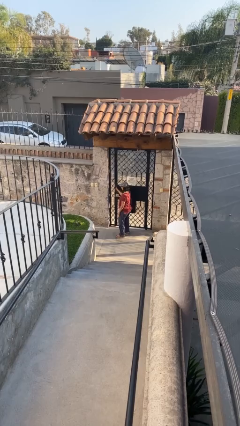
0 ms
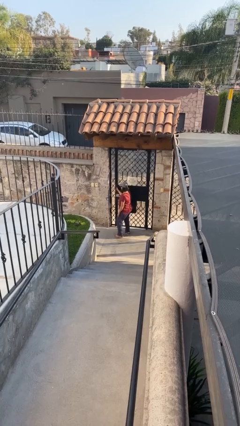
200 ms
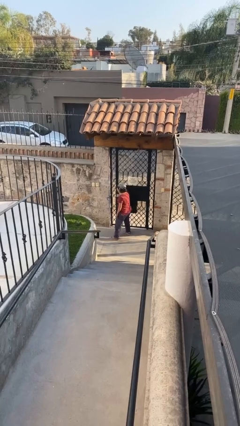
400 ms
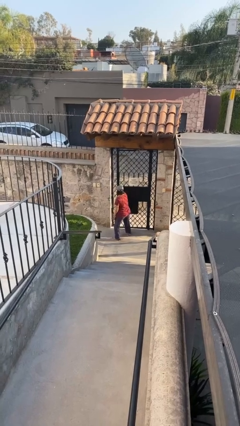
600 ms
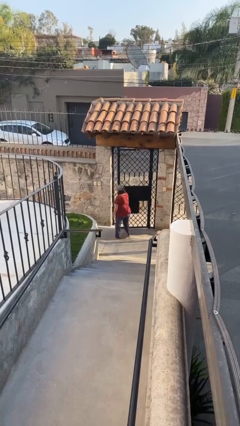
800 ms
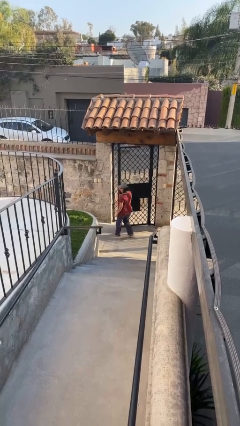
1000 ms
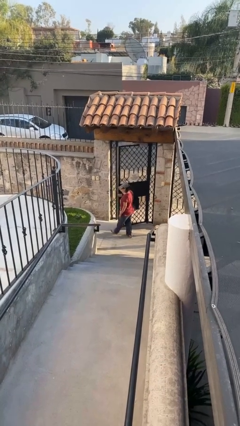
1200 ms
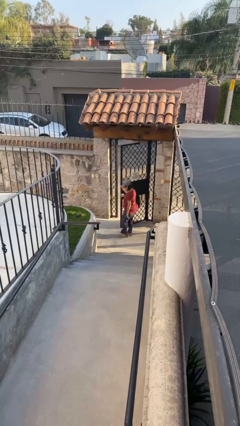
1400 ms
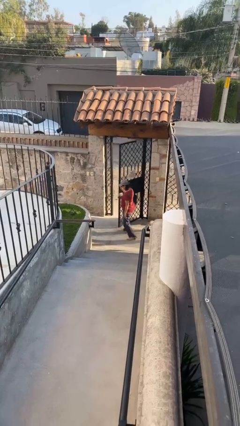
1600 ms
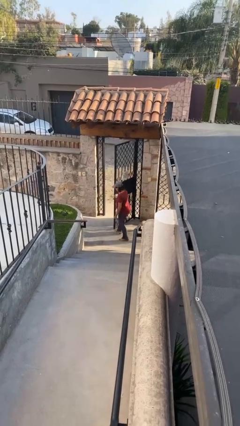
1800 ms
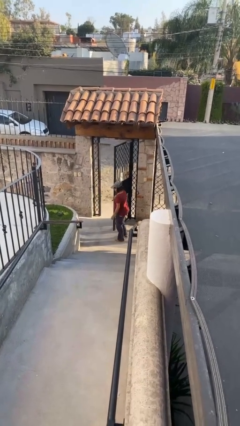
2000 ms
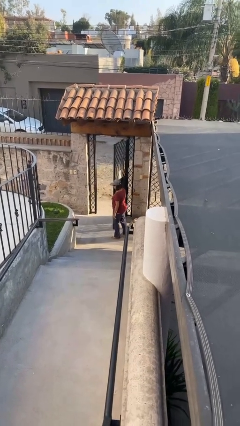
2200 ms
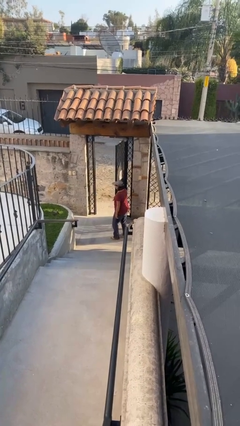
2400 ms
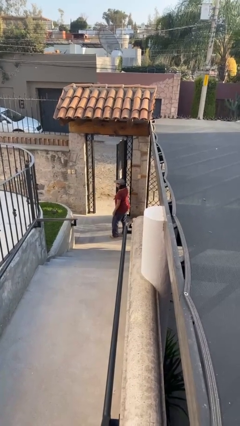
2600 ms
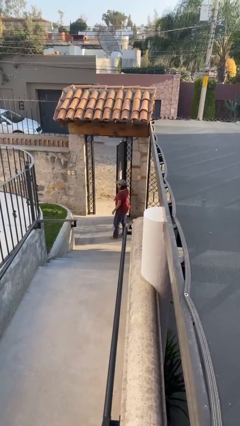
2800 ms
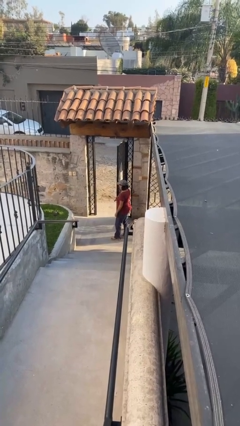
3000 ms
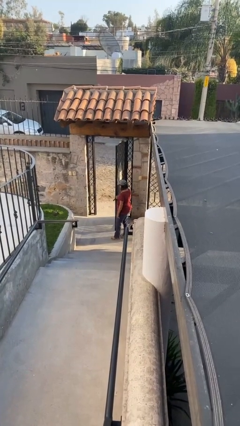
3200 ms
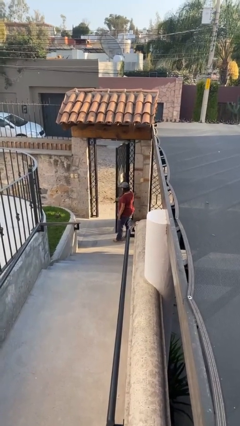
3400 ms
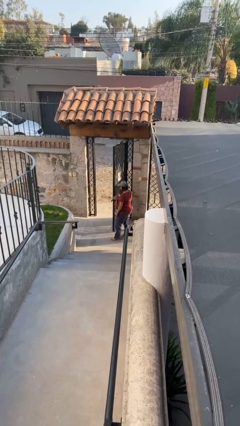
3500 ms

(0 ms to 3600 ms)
person opens facility door

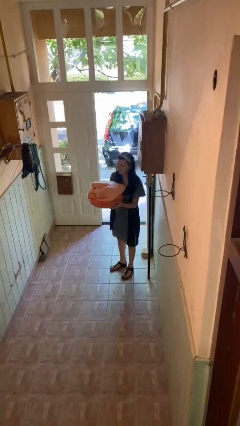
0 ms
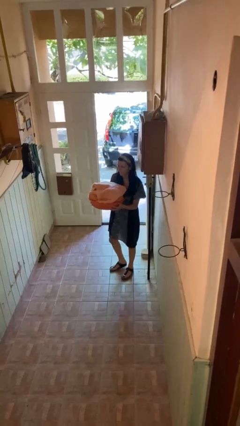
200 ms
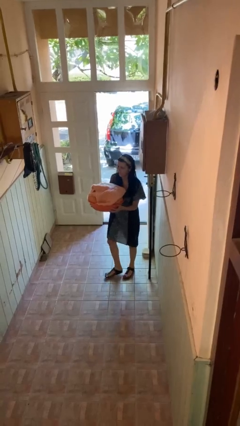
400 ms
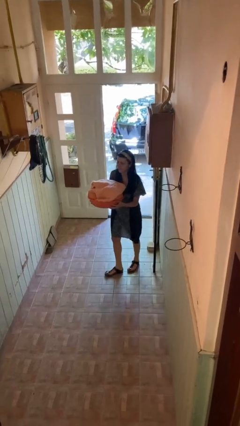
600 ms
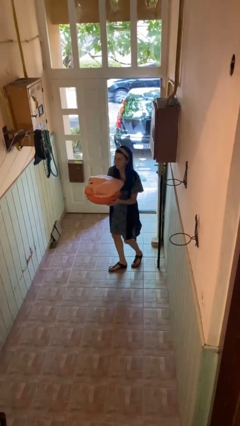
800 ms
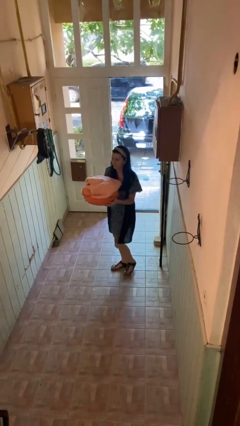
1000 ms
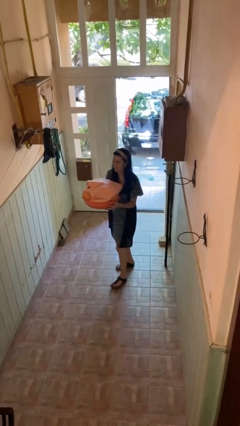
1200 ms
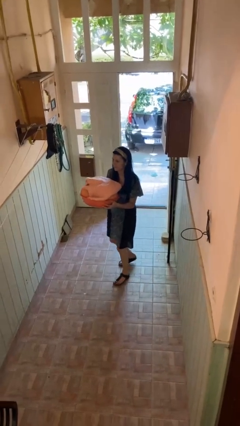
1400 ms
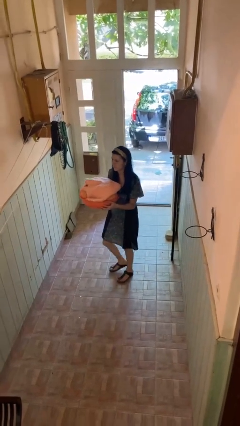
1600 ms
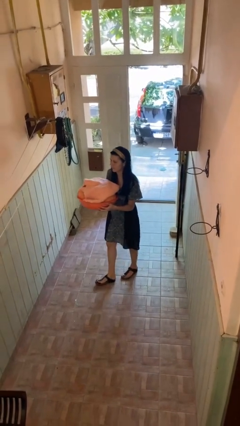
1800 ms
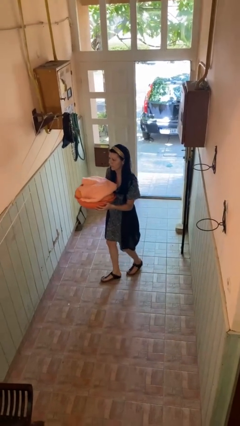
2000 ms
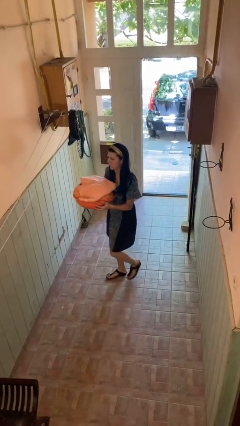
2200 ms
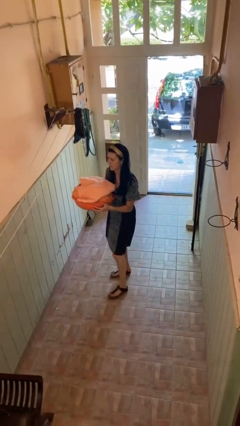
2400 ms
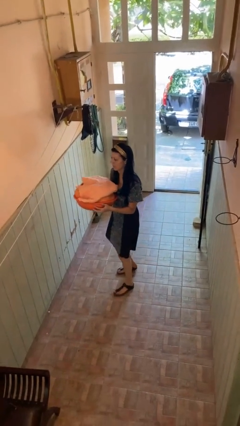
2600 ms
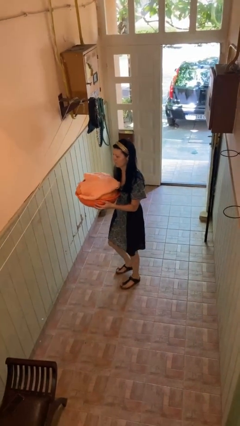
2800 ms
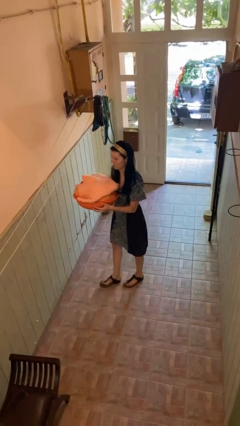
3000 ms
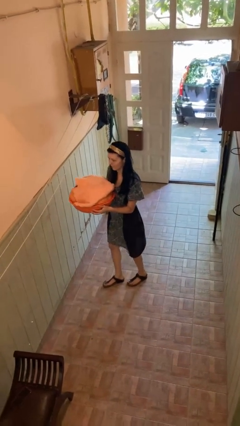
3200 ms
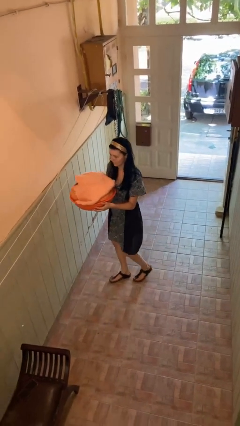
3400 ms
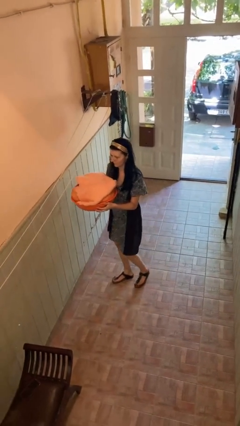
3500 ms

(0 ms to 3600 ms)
person carries laundry basket

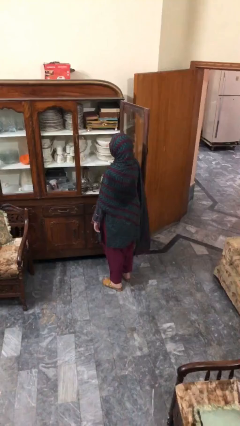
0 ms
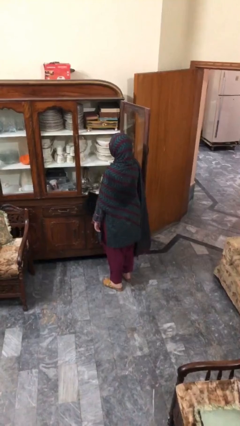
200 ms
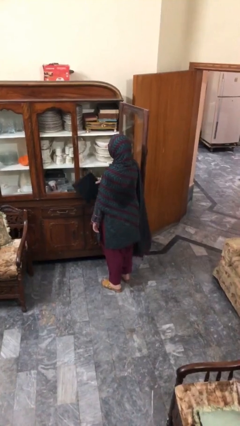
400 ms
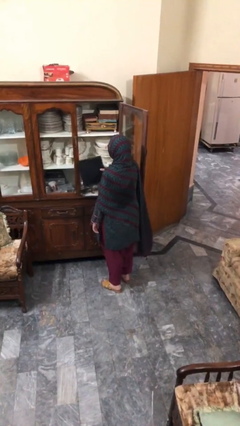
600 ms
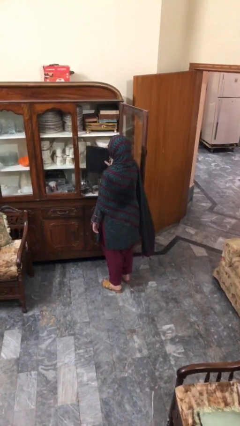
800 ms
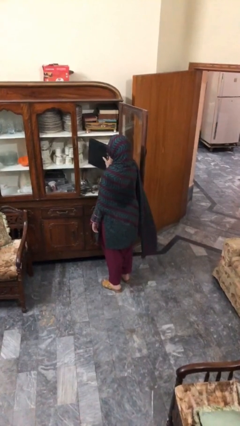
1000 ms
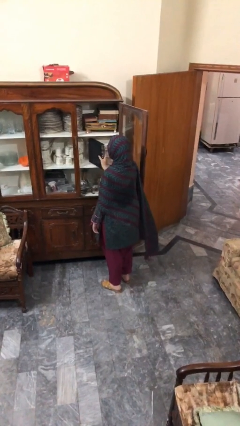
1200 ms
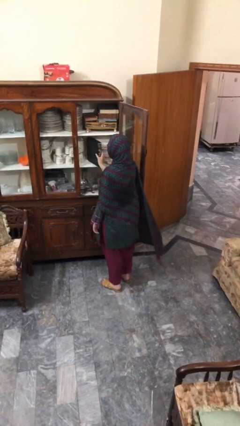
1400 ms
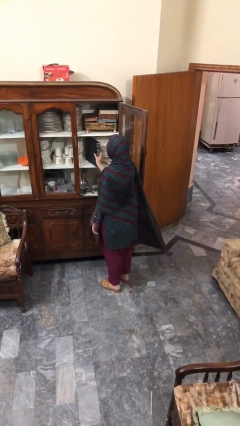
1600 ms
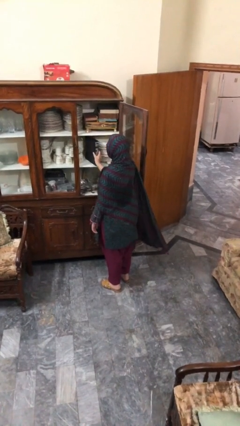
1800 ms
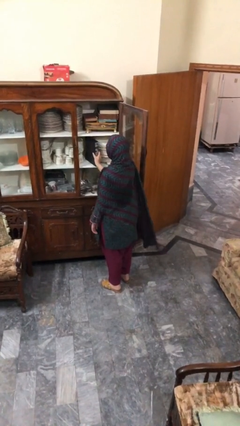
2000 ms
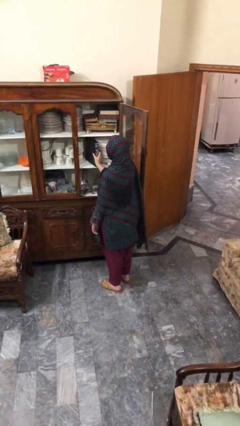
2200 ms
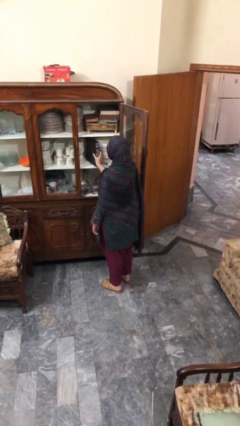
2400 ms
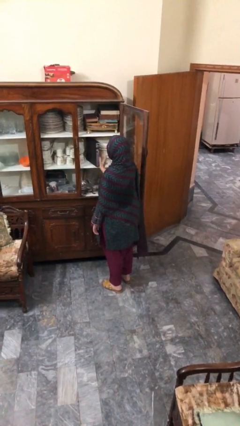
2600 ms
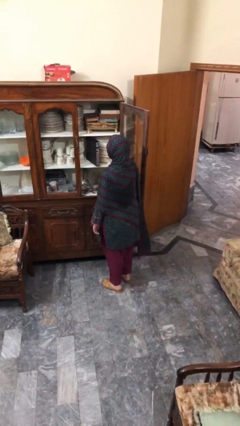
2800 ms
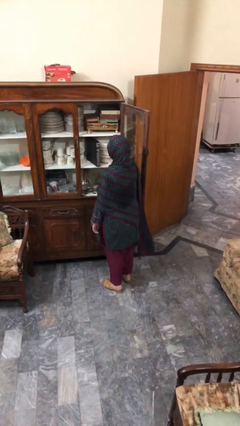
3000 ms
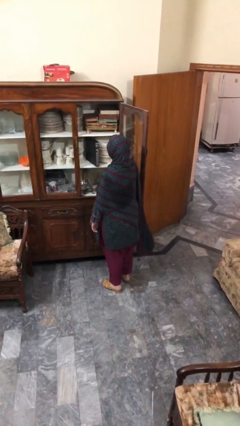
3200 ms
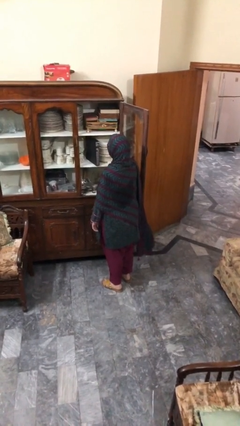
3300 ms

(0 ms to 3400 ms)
person puts down object on countertop

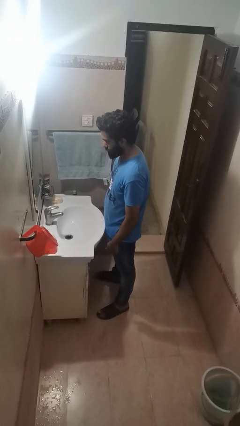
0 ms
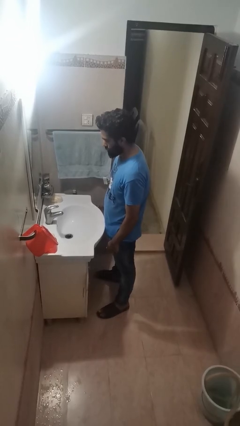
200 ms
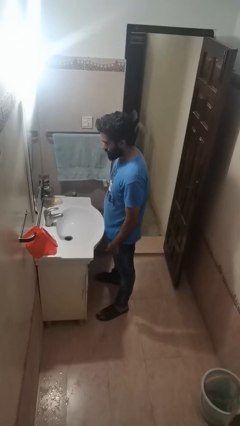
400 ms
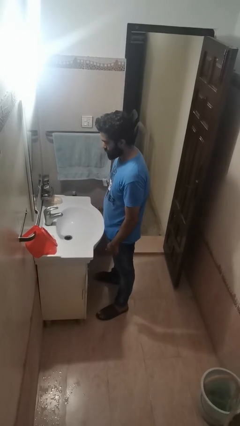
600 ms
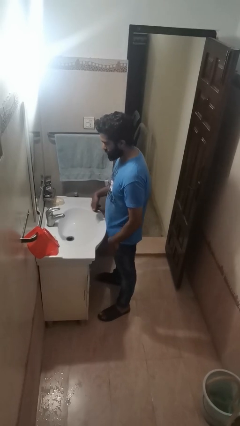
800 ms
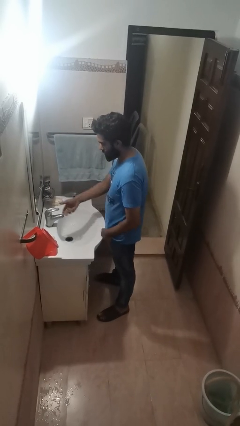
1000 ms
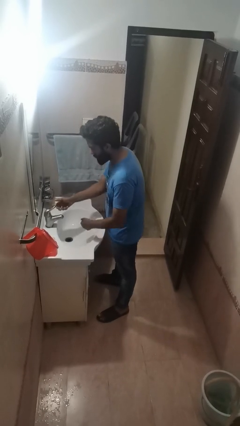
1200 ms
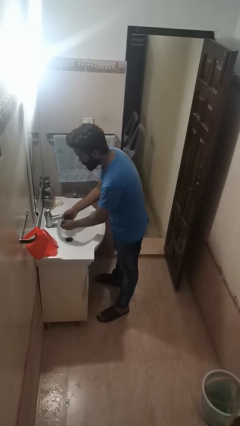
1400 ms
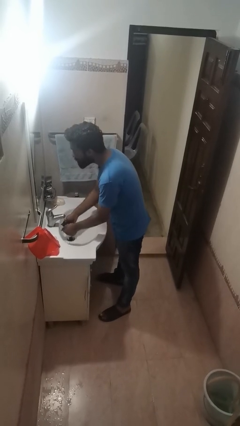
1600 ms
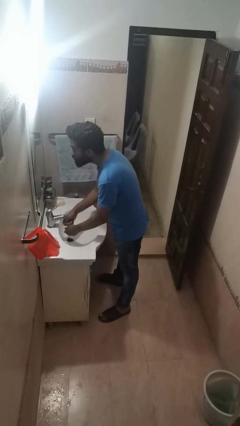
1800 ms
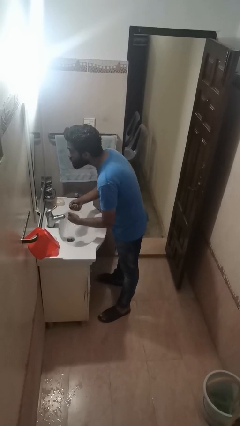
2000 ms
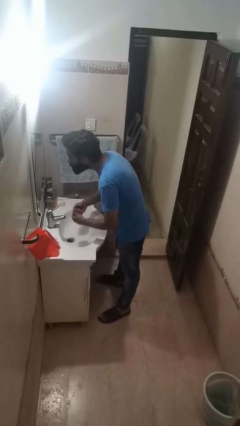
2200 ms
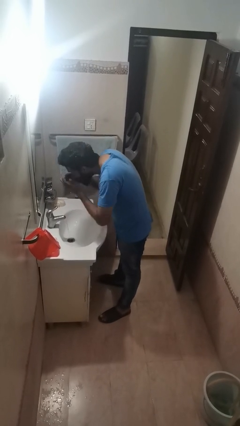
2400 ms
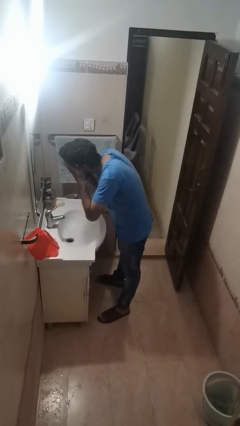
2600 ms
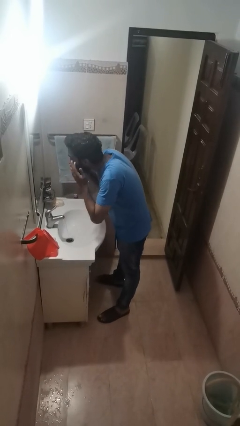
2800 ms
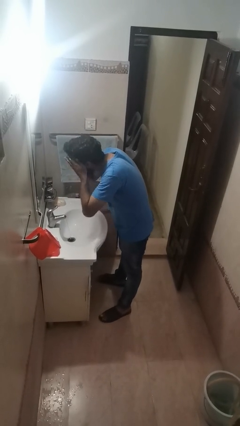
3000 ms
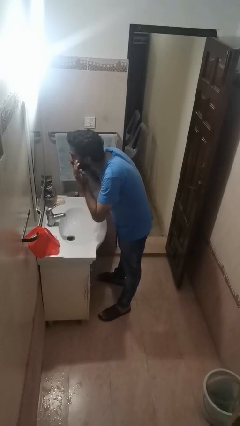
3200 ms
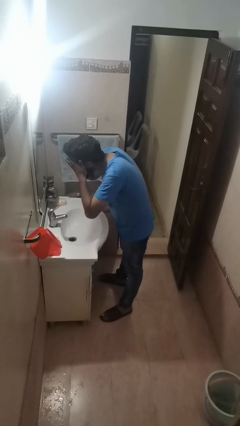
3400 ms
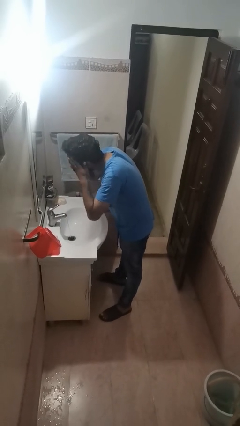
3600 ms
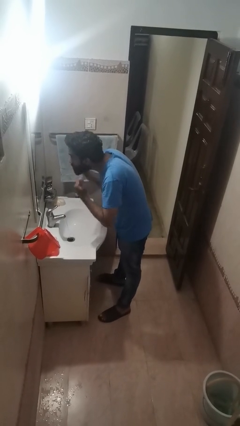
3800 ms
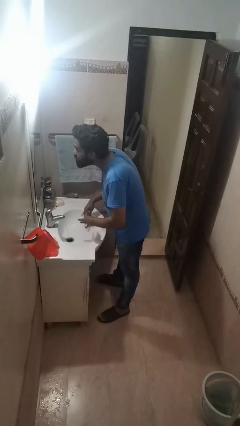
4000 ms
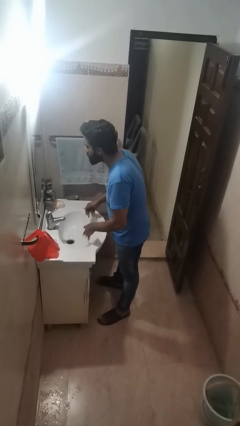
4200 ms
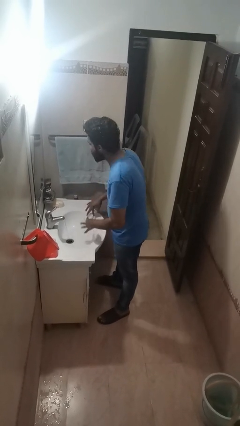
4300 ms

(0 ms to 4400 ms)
person washes face

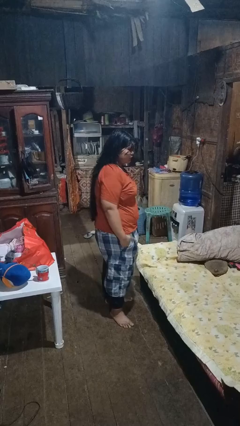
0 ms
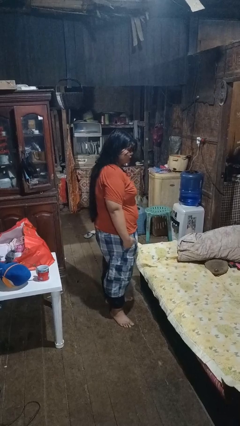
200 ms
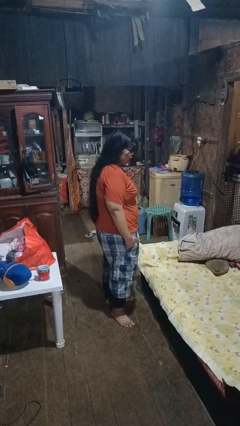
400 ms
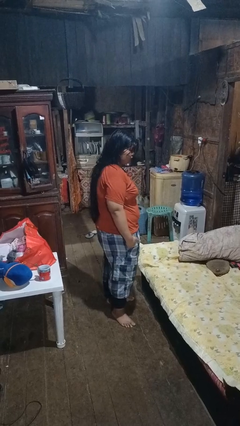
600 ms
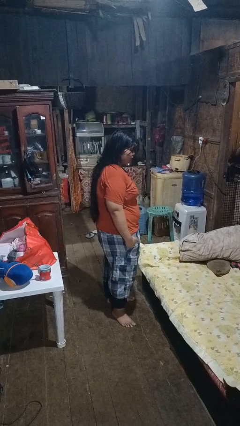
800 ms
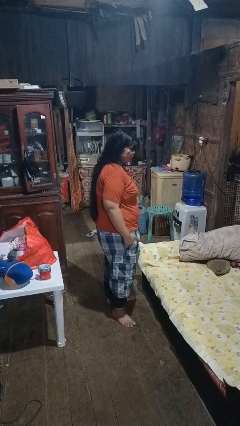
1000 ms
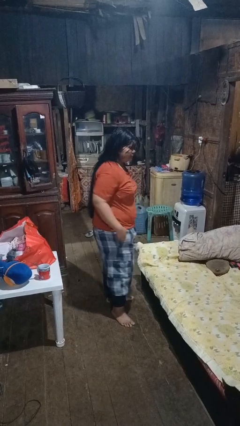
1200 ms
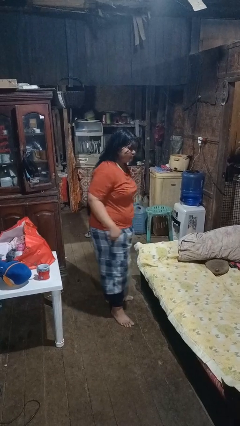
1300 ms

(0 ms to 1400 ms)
person puts hands in back pockets

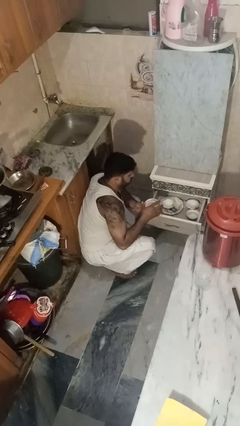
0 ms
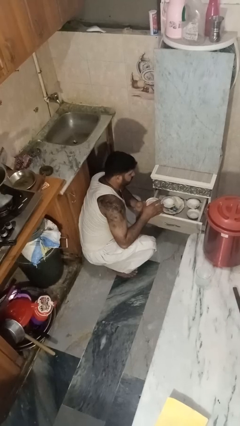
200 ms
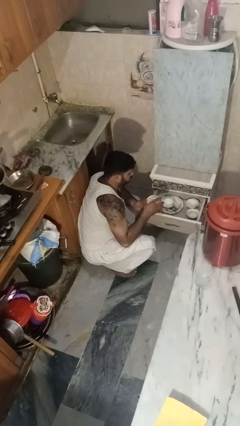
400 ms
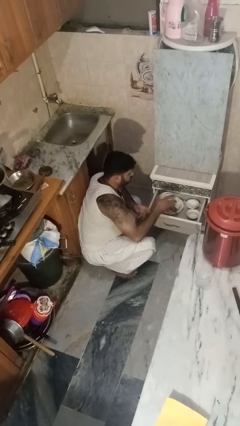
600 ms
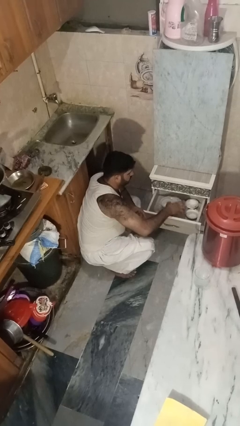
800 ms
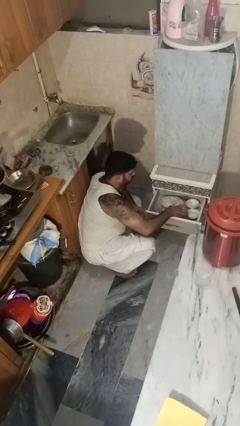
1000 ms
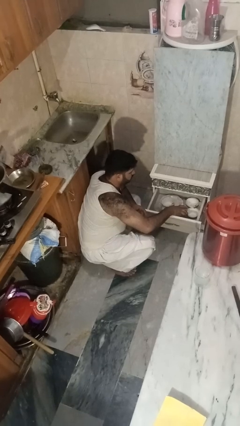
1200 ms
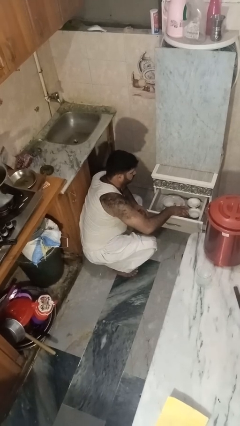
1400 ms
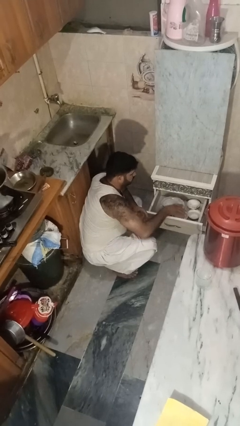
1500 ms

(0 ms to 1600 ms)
person puts object into kitchen drawer
